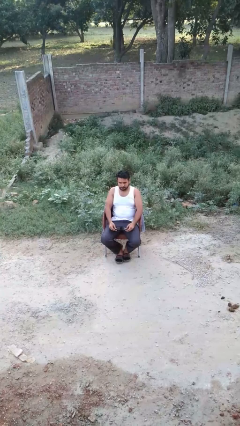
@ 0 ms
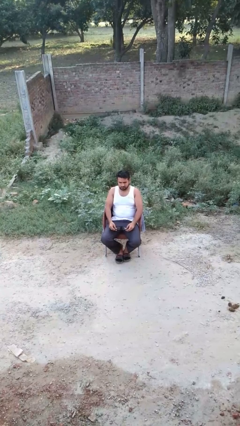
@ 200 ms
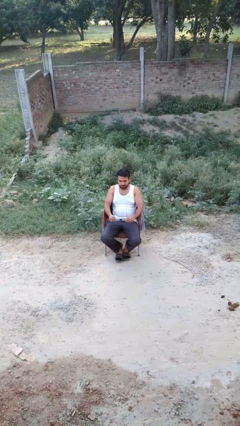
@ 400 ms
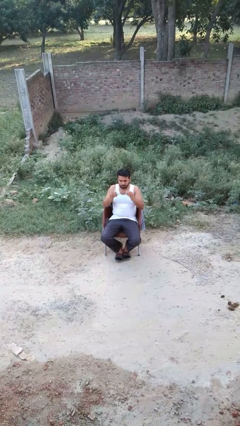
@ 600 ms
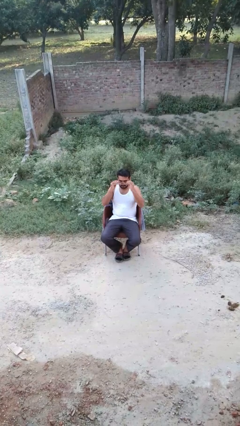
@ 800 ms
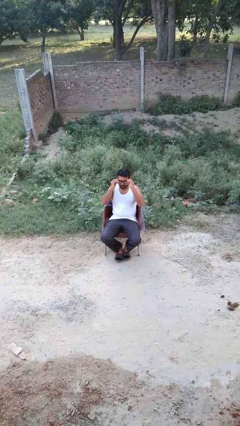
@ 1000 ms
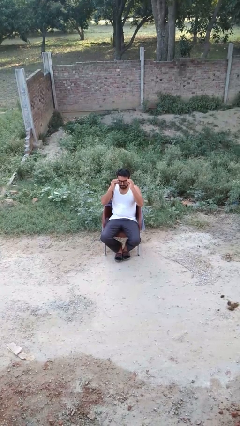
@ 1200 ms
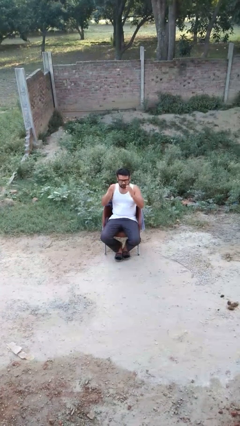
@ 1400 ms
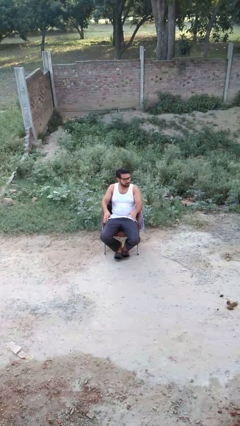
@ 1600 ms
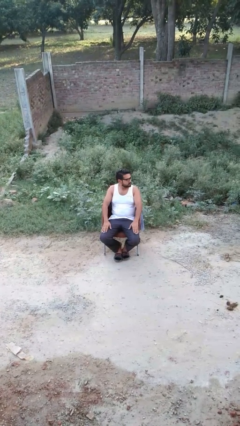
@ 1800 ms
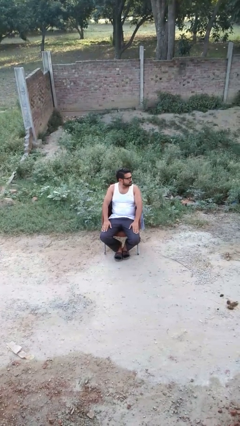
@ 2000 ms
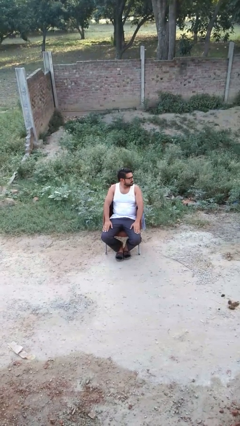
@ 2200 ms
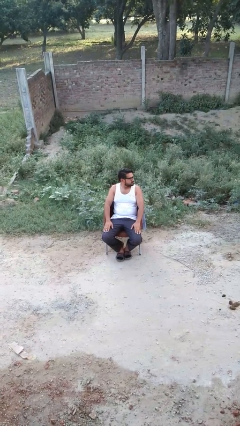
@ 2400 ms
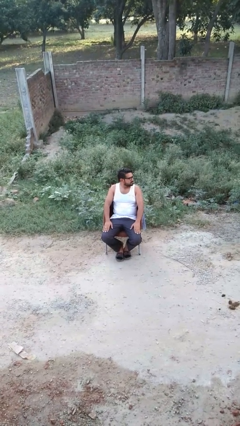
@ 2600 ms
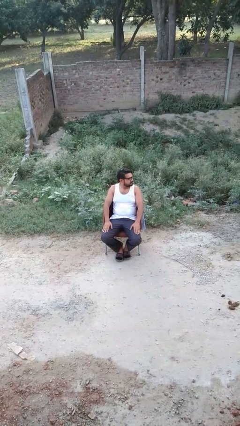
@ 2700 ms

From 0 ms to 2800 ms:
person puts on glasses

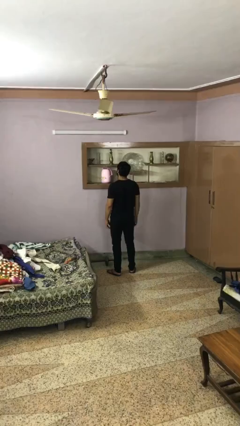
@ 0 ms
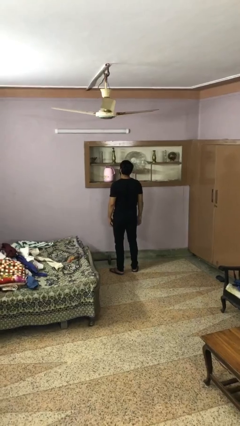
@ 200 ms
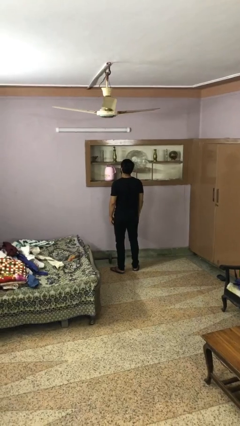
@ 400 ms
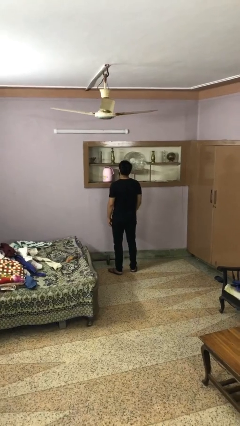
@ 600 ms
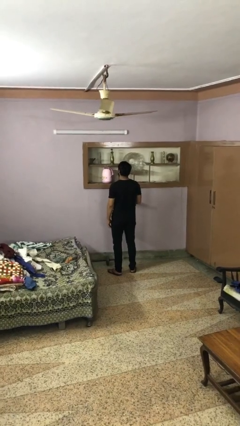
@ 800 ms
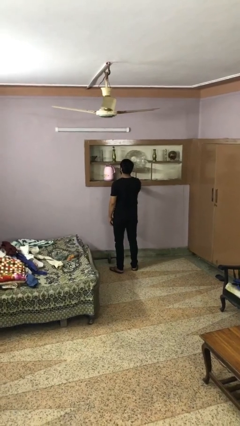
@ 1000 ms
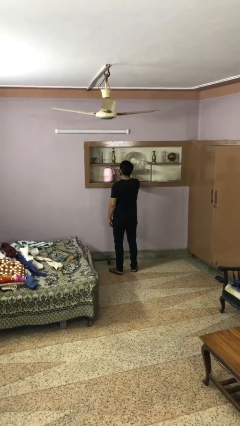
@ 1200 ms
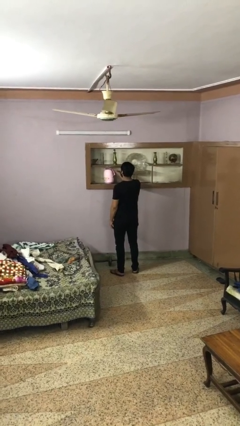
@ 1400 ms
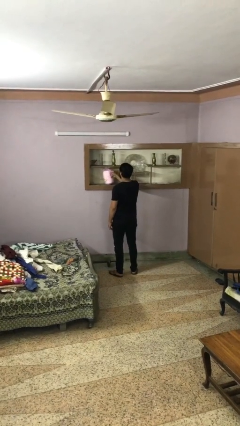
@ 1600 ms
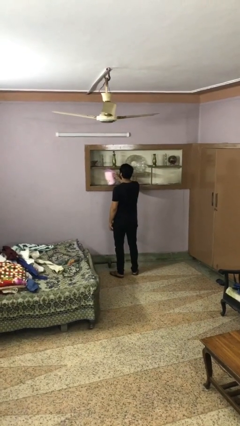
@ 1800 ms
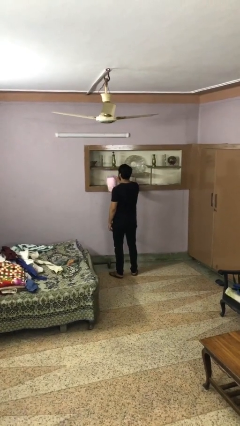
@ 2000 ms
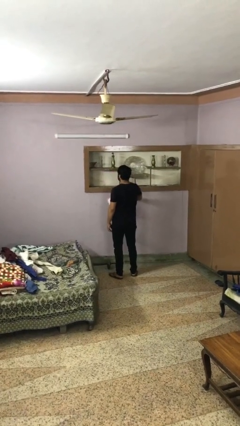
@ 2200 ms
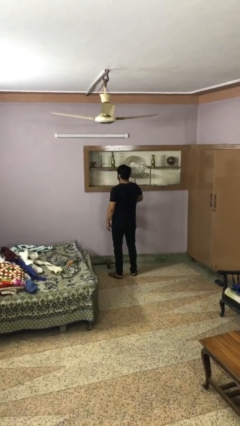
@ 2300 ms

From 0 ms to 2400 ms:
person picks up object from countertop

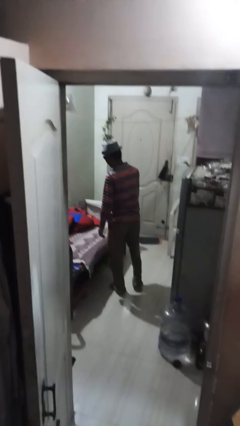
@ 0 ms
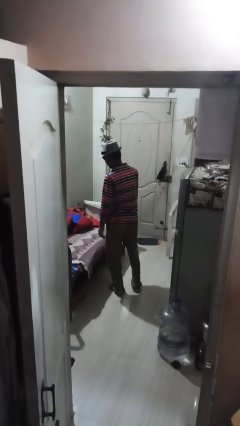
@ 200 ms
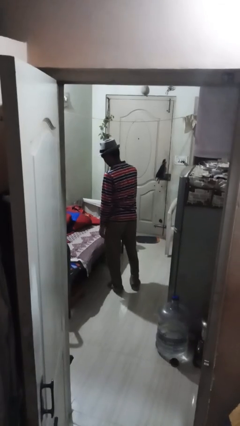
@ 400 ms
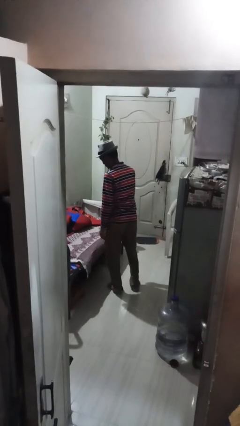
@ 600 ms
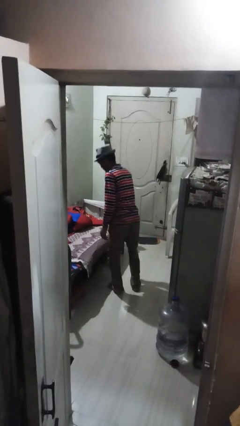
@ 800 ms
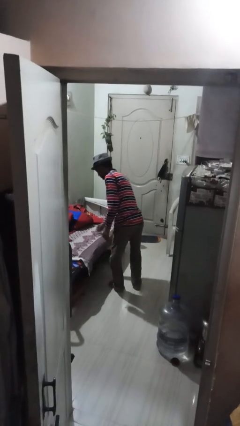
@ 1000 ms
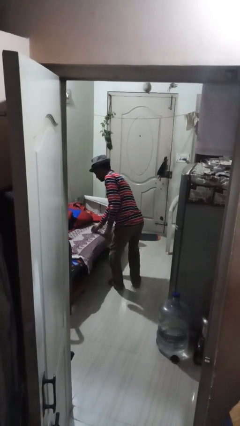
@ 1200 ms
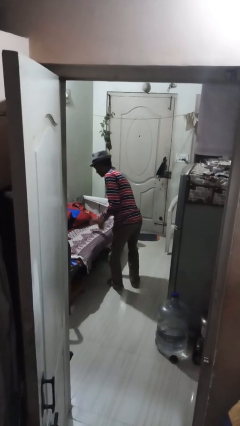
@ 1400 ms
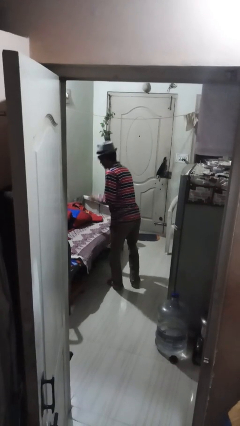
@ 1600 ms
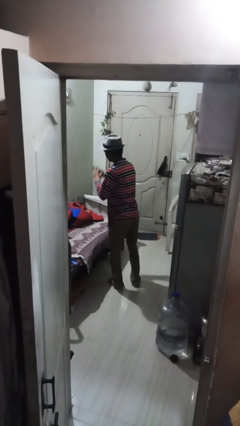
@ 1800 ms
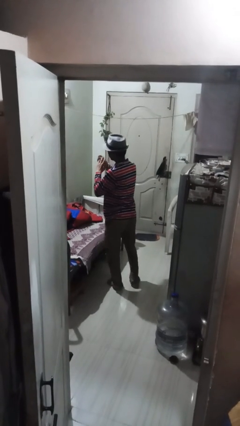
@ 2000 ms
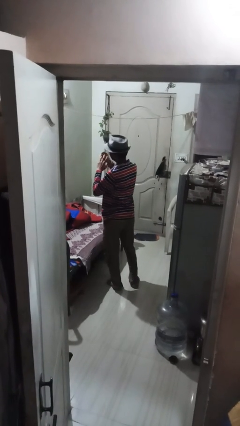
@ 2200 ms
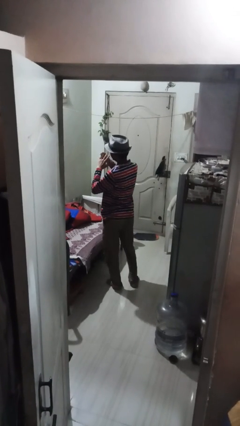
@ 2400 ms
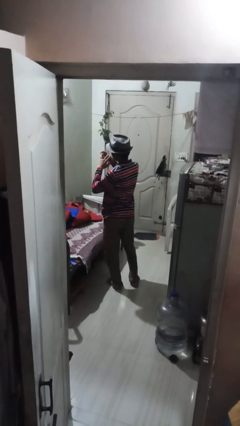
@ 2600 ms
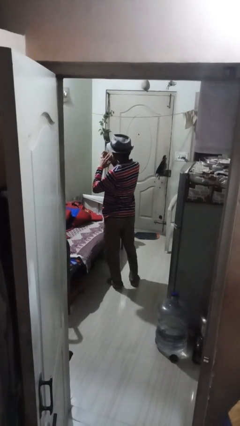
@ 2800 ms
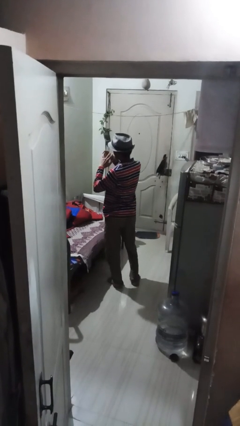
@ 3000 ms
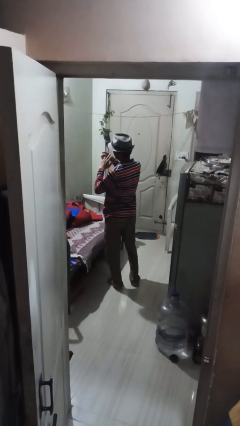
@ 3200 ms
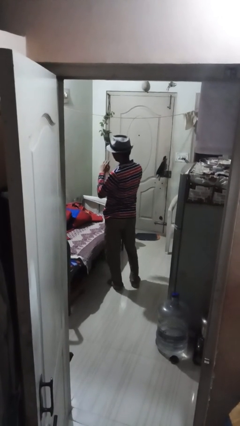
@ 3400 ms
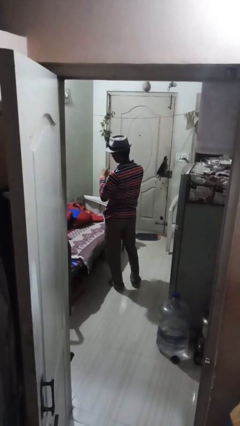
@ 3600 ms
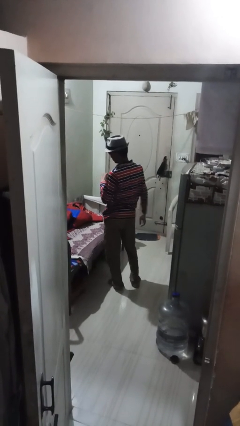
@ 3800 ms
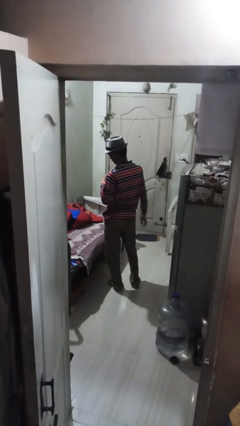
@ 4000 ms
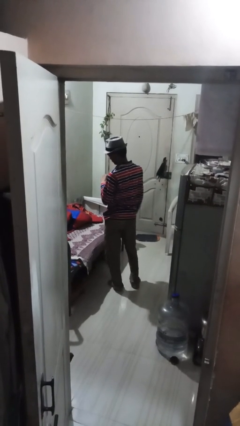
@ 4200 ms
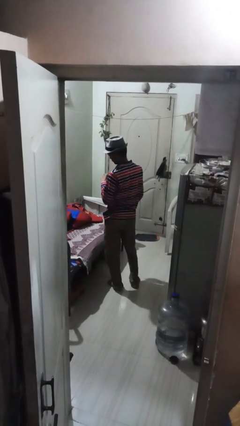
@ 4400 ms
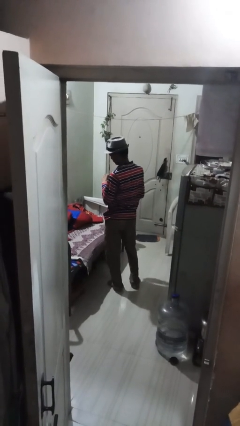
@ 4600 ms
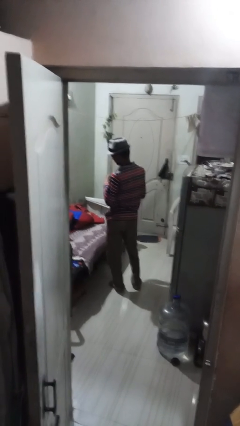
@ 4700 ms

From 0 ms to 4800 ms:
person puts on ring

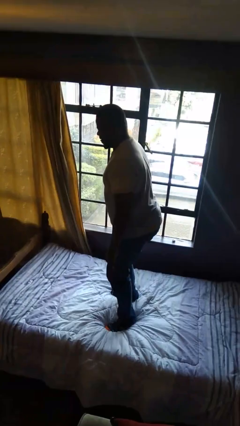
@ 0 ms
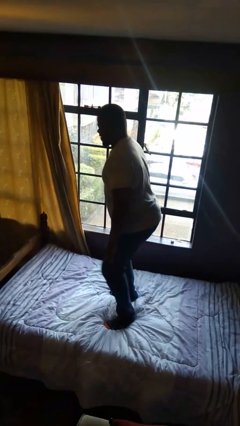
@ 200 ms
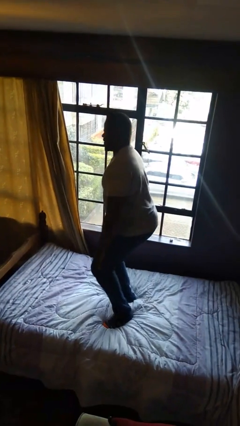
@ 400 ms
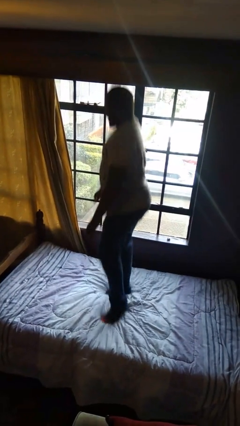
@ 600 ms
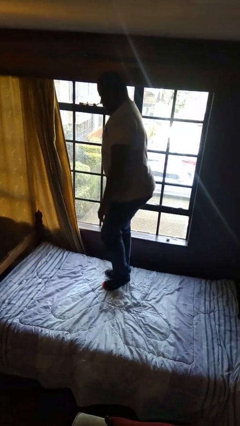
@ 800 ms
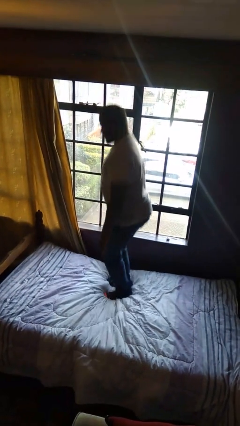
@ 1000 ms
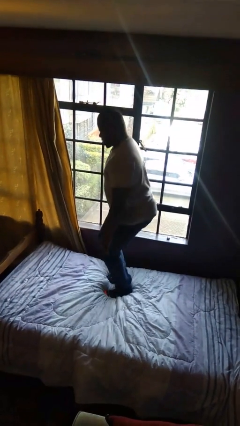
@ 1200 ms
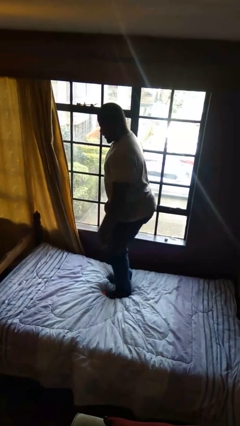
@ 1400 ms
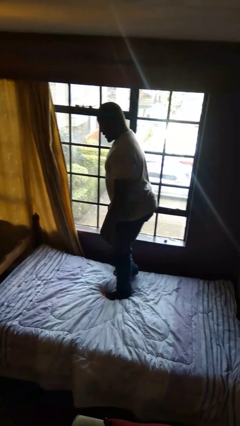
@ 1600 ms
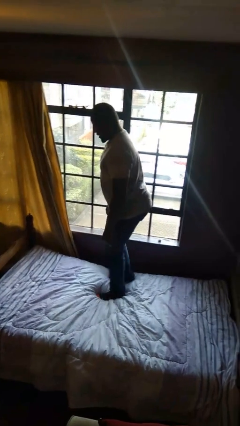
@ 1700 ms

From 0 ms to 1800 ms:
person jumps on bed

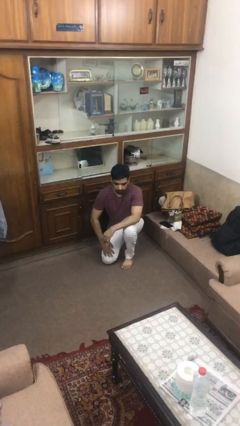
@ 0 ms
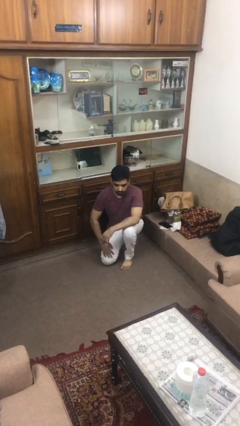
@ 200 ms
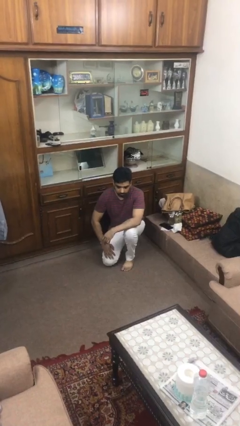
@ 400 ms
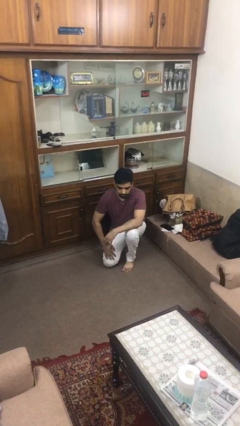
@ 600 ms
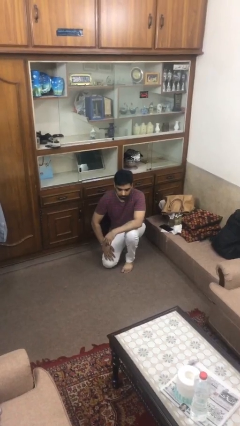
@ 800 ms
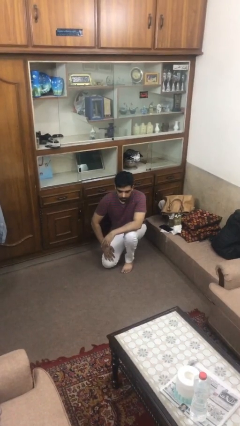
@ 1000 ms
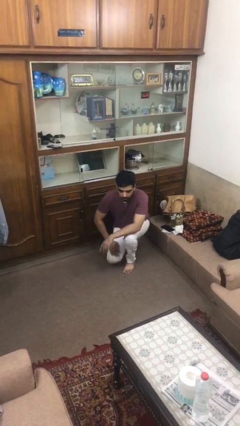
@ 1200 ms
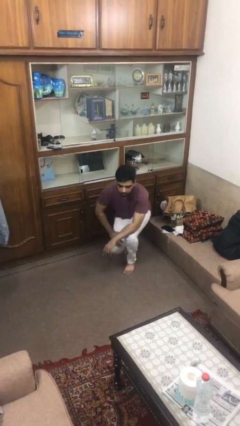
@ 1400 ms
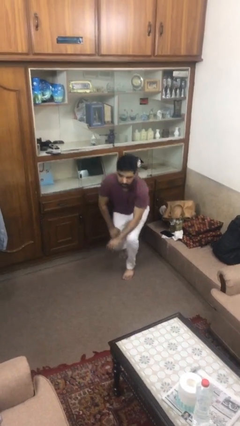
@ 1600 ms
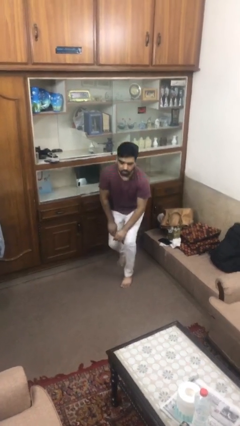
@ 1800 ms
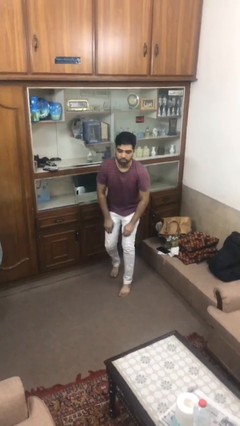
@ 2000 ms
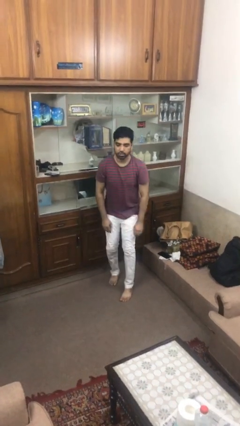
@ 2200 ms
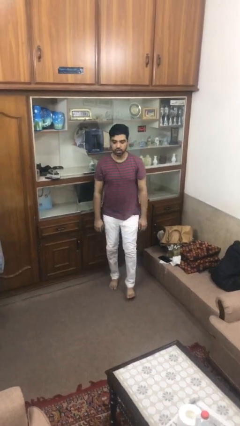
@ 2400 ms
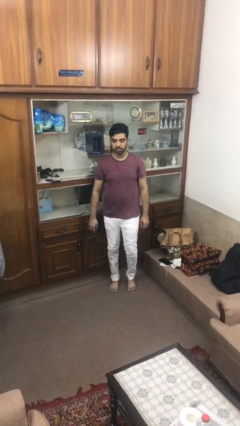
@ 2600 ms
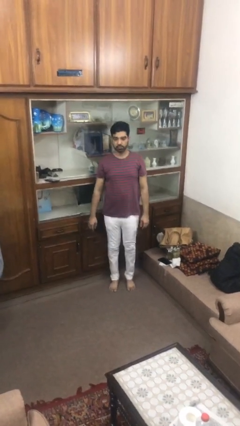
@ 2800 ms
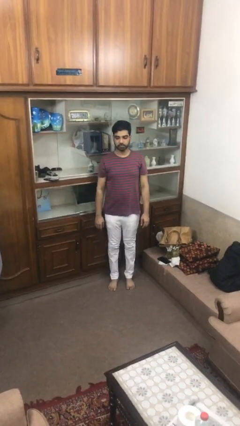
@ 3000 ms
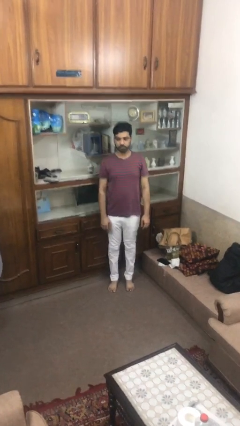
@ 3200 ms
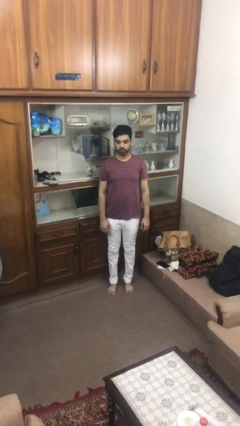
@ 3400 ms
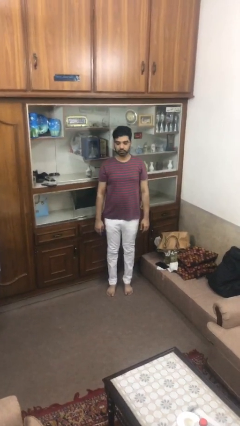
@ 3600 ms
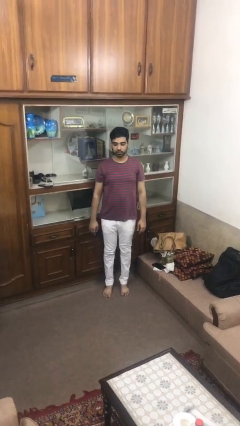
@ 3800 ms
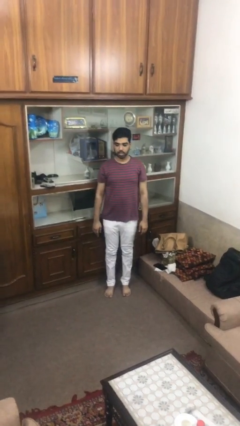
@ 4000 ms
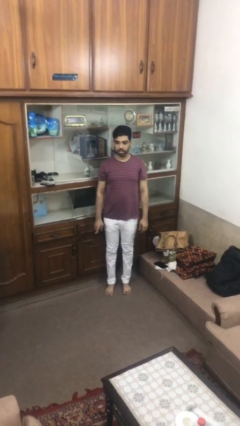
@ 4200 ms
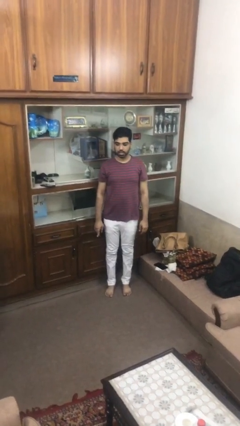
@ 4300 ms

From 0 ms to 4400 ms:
person stands up from floor

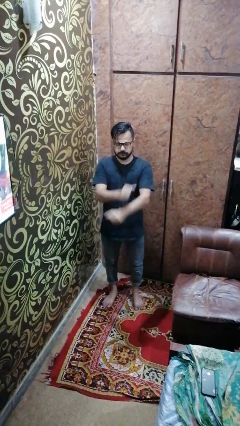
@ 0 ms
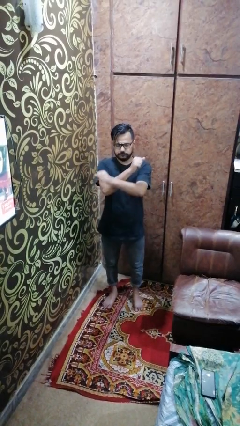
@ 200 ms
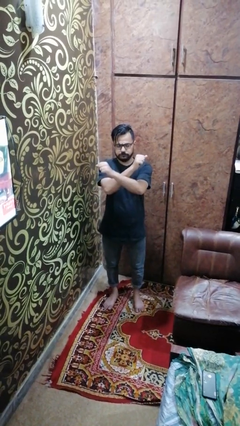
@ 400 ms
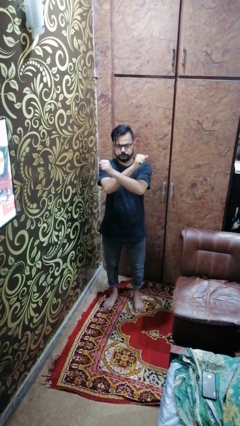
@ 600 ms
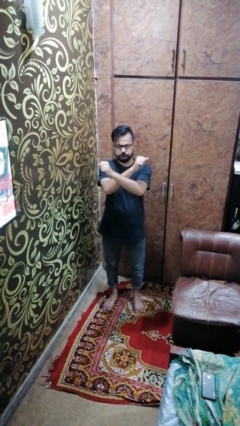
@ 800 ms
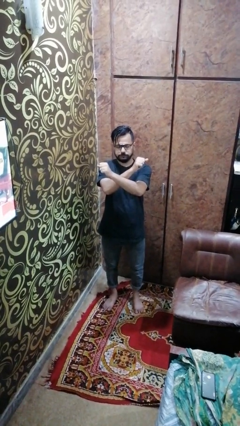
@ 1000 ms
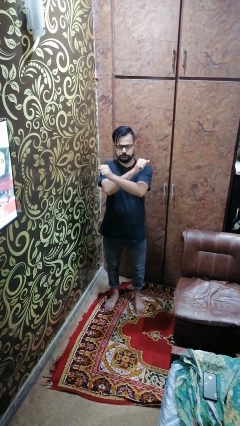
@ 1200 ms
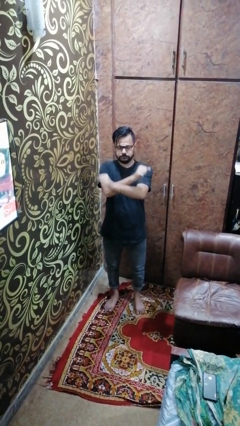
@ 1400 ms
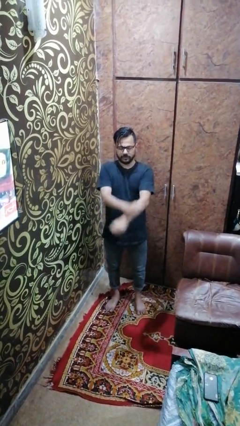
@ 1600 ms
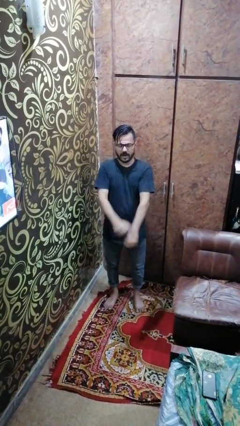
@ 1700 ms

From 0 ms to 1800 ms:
person crosses arms
